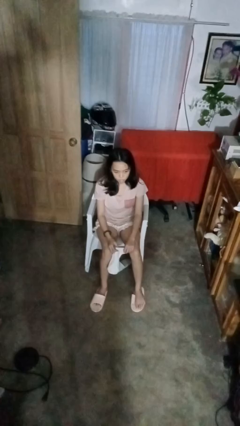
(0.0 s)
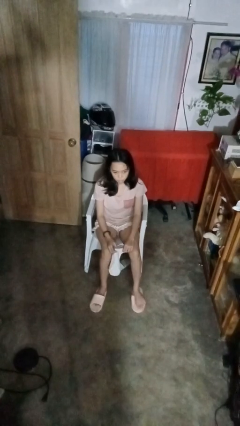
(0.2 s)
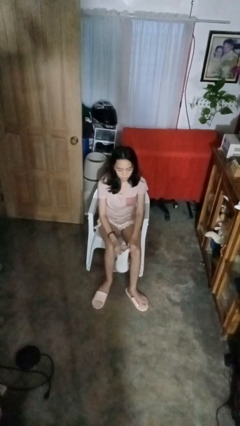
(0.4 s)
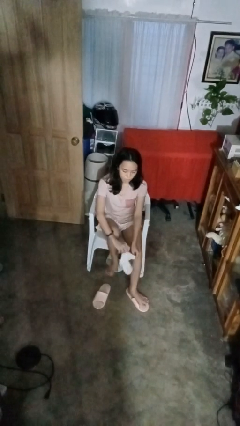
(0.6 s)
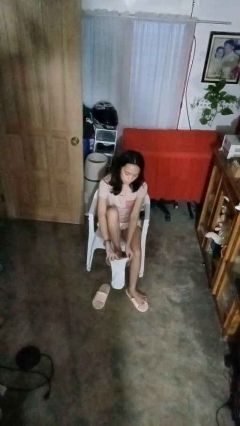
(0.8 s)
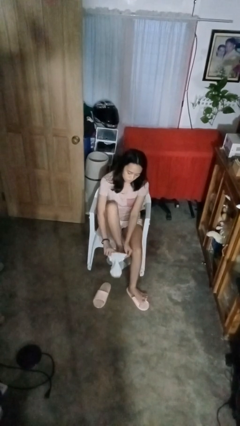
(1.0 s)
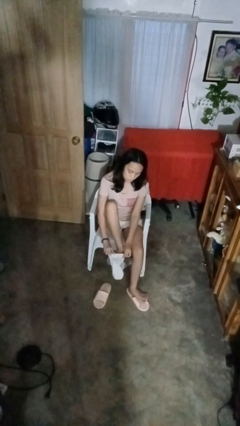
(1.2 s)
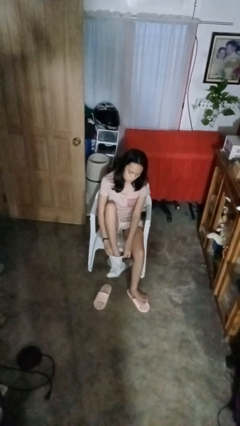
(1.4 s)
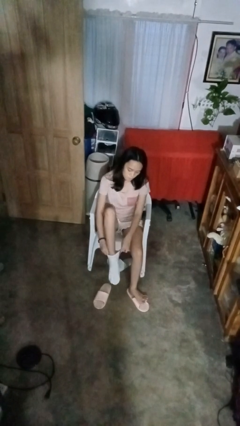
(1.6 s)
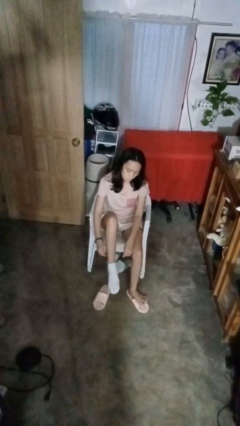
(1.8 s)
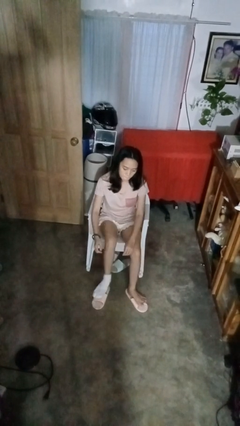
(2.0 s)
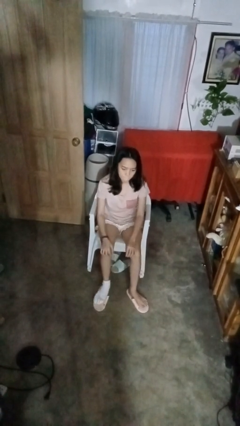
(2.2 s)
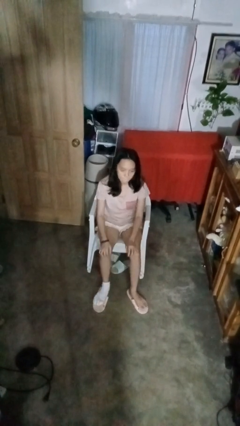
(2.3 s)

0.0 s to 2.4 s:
person puts on socks

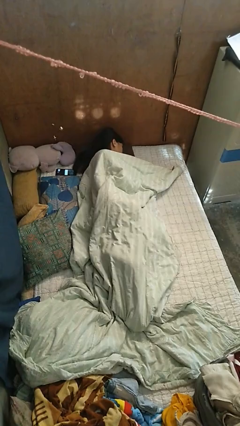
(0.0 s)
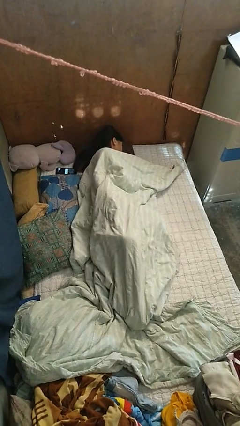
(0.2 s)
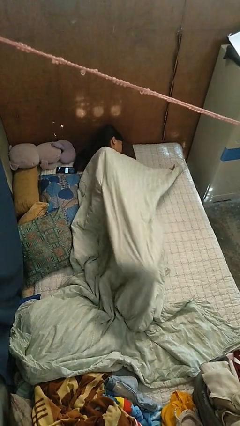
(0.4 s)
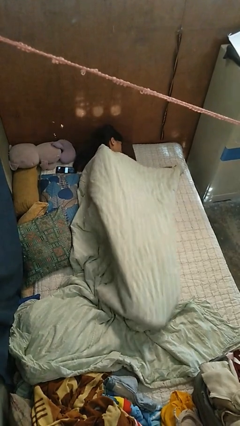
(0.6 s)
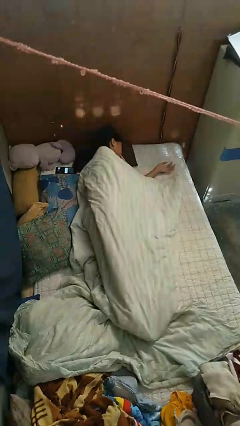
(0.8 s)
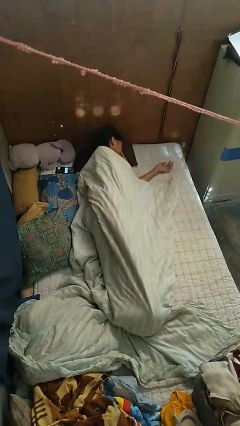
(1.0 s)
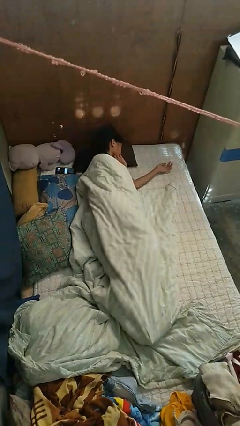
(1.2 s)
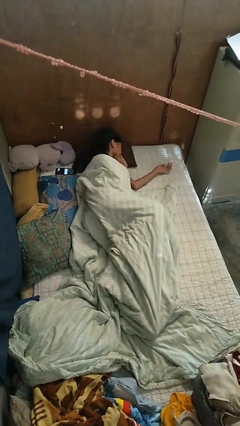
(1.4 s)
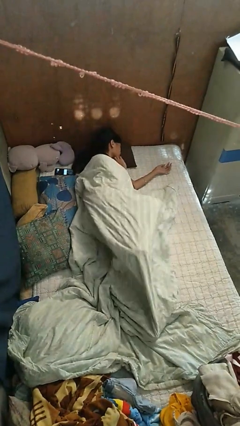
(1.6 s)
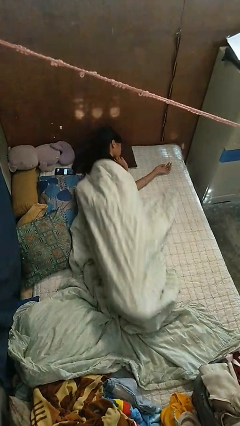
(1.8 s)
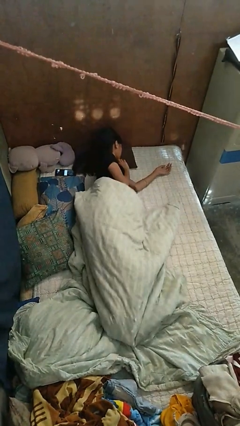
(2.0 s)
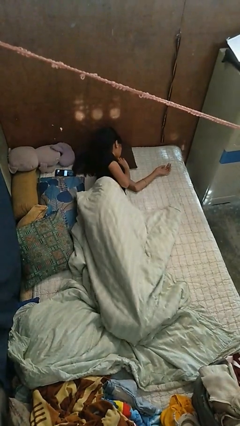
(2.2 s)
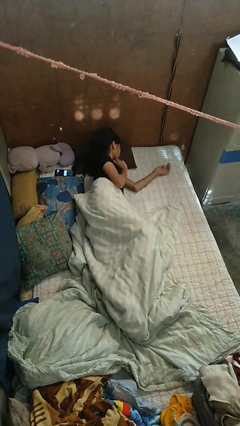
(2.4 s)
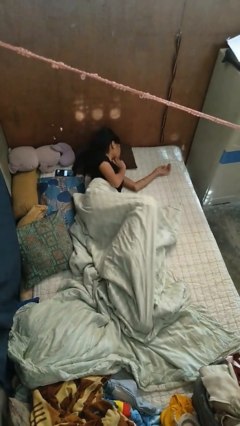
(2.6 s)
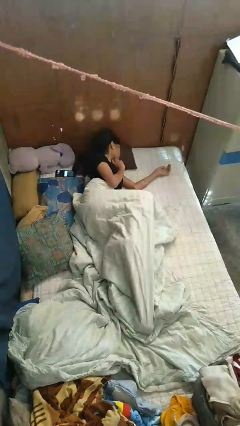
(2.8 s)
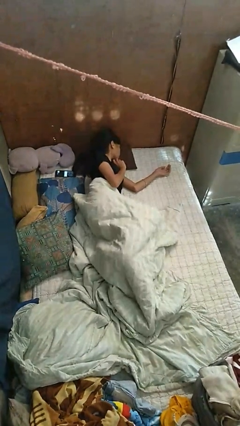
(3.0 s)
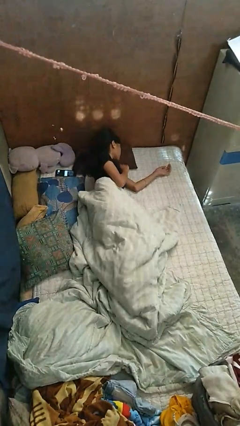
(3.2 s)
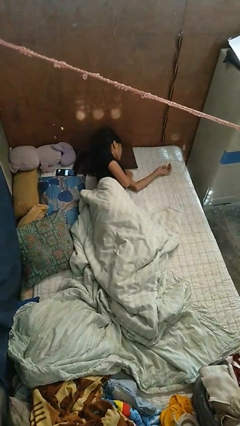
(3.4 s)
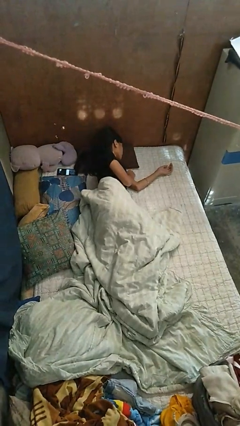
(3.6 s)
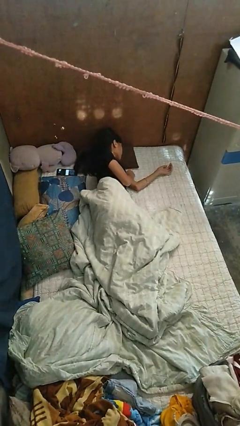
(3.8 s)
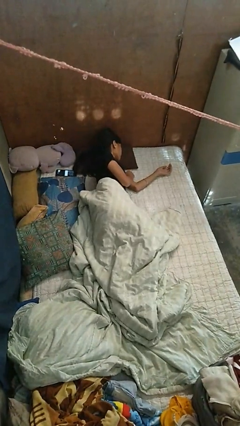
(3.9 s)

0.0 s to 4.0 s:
person uncovers with bedsheets

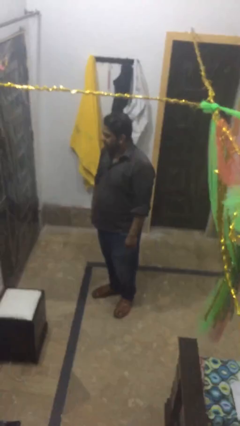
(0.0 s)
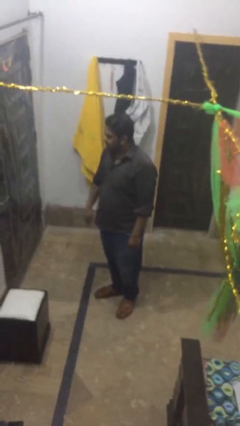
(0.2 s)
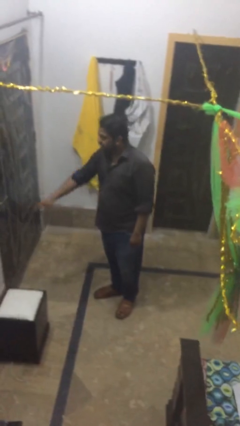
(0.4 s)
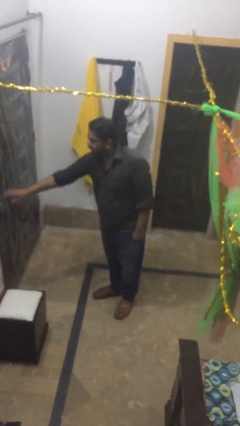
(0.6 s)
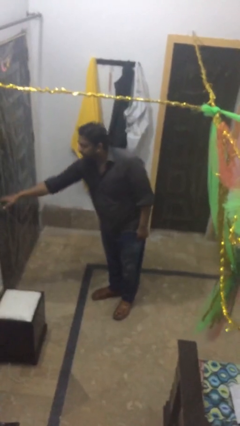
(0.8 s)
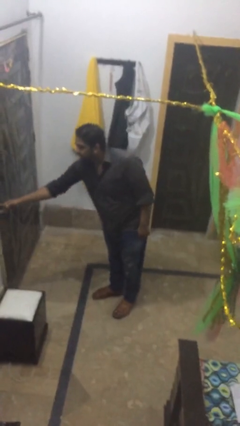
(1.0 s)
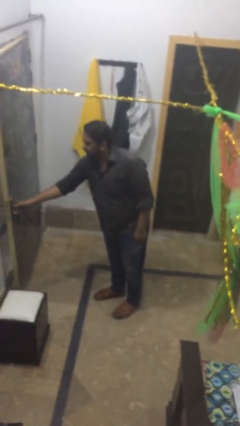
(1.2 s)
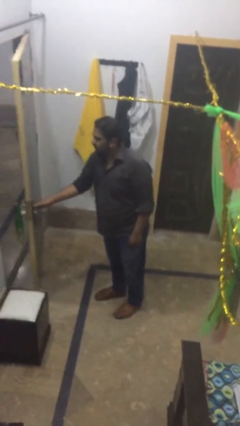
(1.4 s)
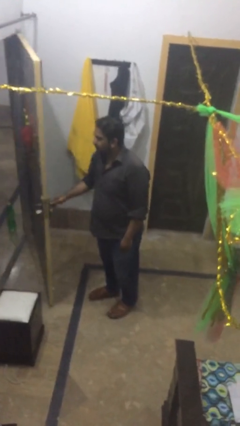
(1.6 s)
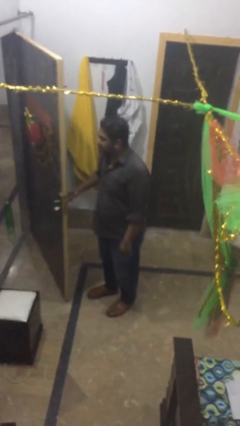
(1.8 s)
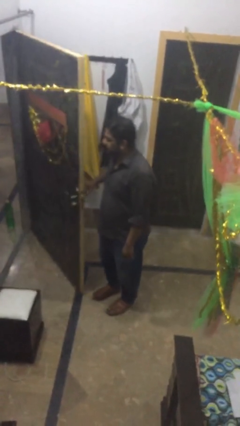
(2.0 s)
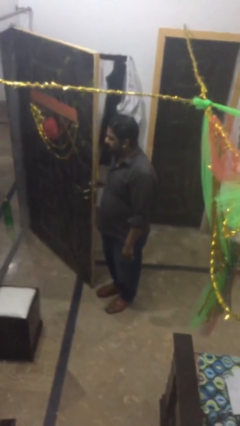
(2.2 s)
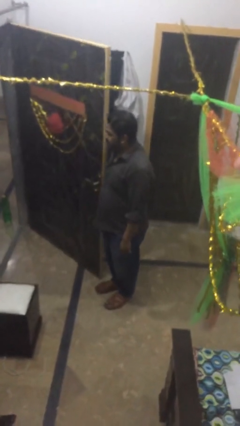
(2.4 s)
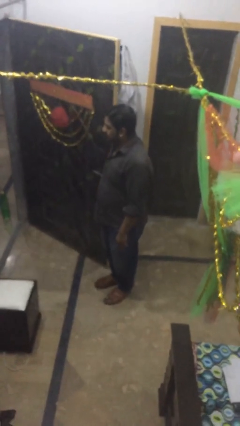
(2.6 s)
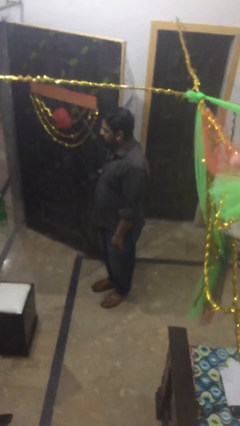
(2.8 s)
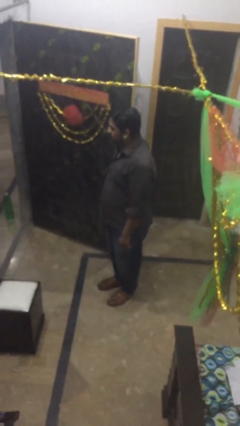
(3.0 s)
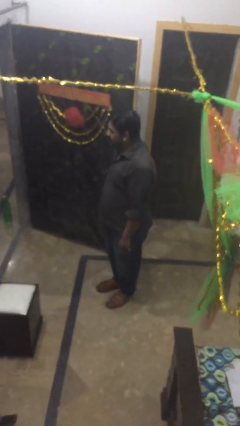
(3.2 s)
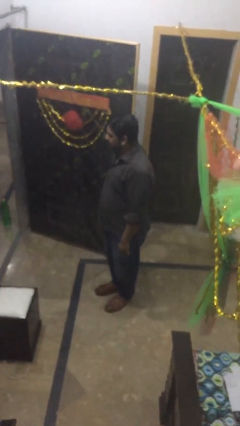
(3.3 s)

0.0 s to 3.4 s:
person opens facility door

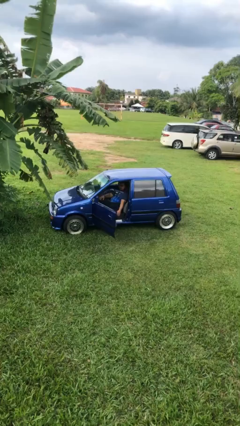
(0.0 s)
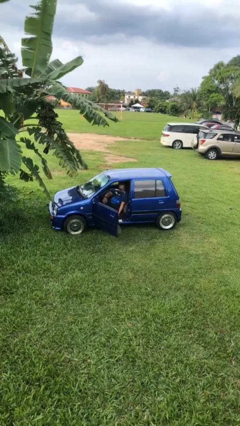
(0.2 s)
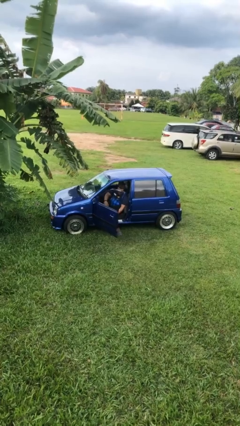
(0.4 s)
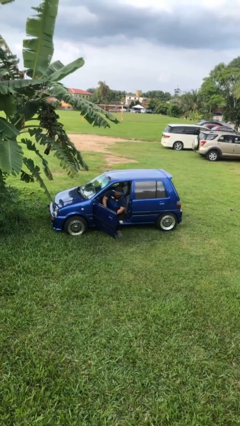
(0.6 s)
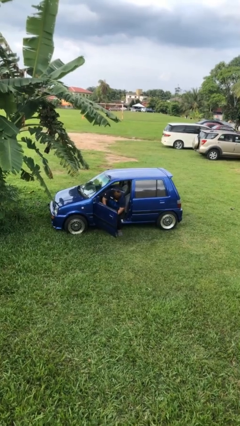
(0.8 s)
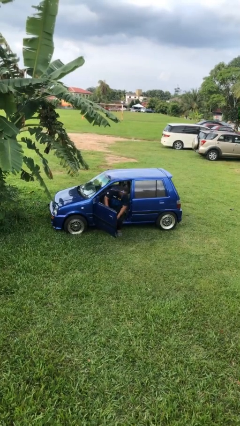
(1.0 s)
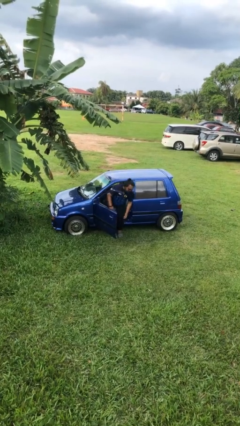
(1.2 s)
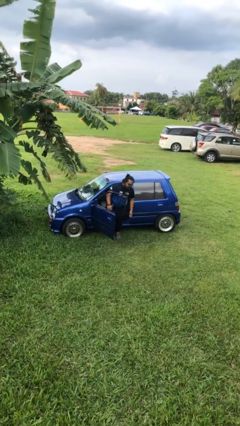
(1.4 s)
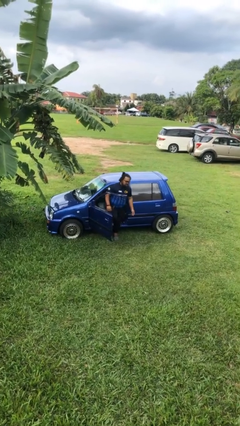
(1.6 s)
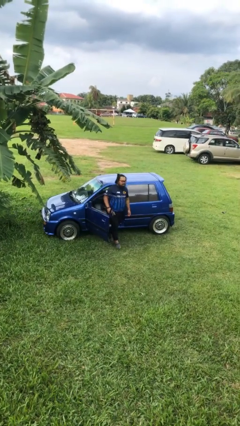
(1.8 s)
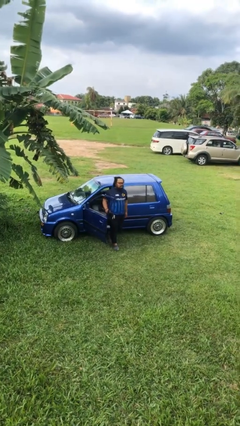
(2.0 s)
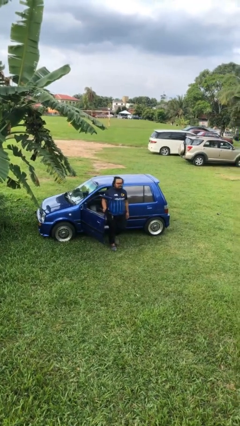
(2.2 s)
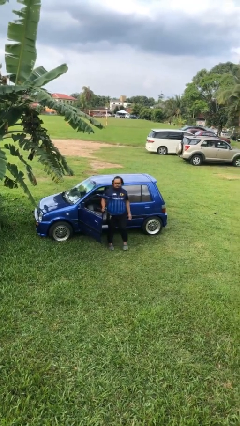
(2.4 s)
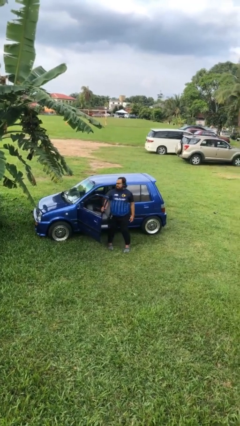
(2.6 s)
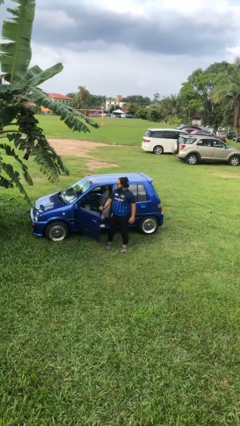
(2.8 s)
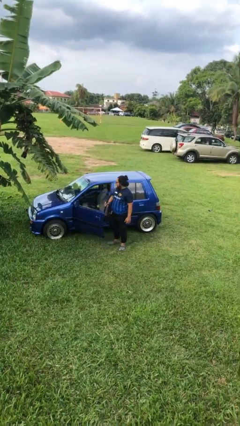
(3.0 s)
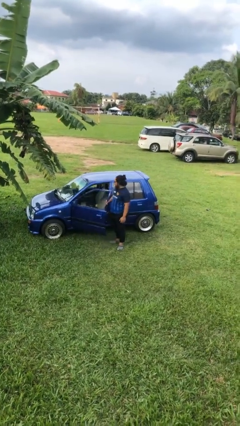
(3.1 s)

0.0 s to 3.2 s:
person exits car

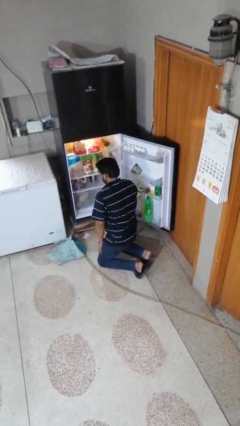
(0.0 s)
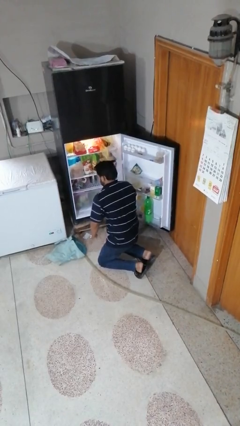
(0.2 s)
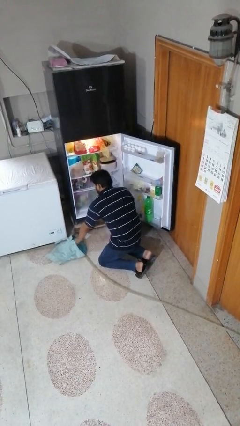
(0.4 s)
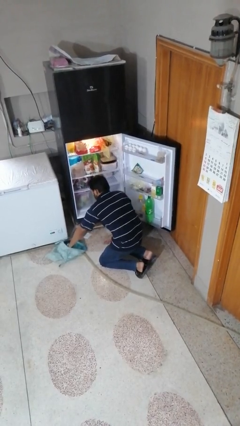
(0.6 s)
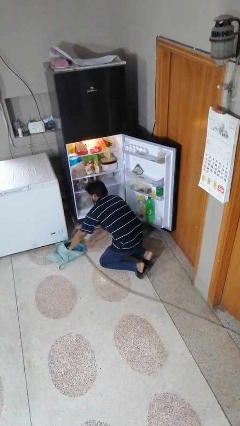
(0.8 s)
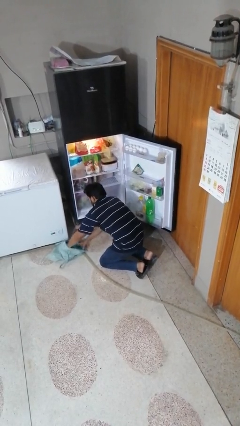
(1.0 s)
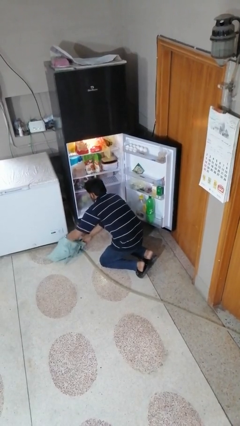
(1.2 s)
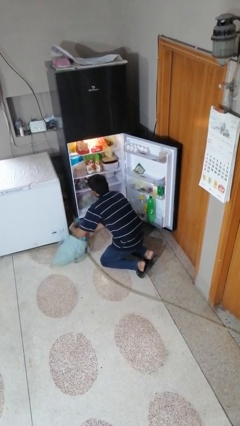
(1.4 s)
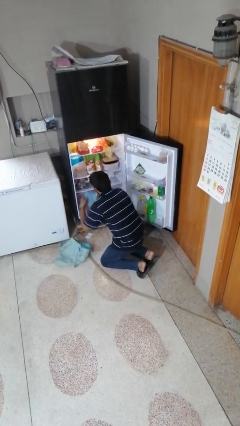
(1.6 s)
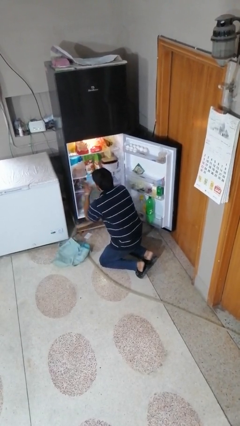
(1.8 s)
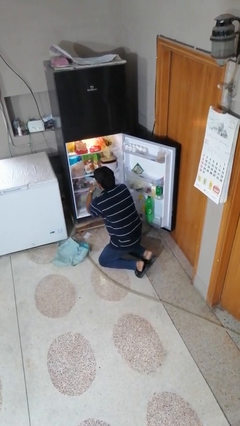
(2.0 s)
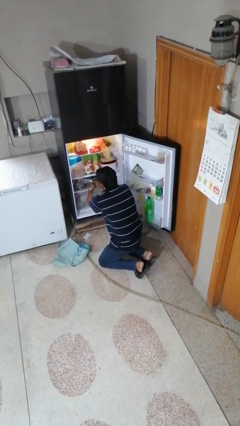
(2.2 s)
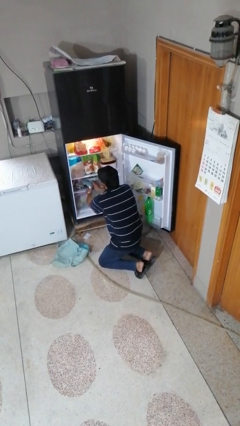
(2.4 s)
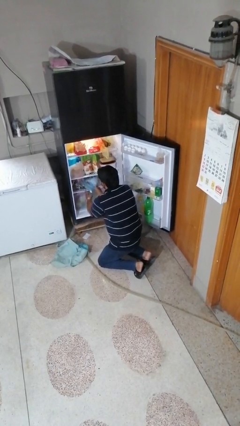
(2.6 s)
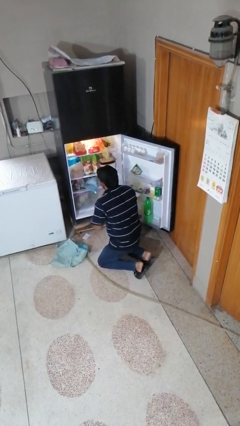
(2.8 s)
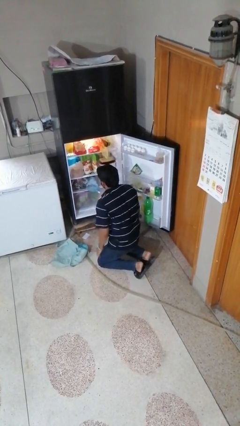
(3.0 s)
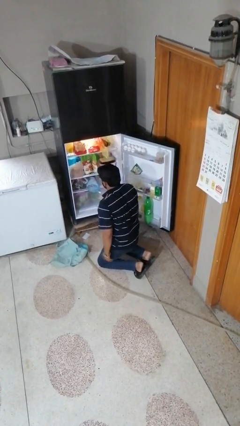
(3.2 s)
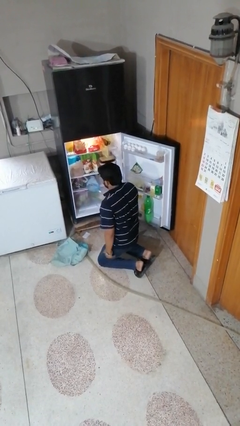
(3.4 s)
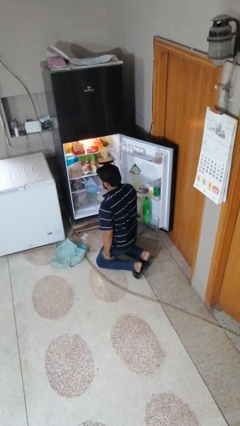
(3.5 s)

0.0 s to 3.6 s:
person loads groceries into refrigerator

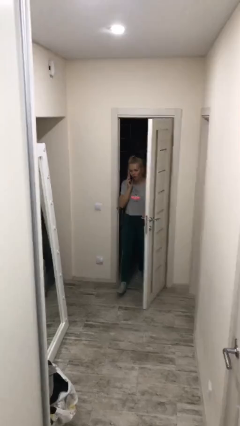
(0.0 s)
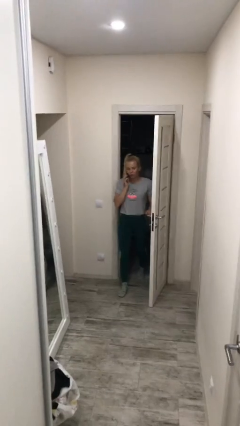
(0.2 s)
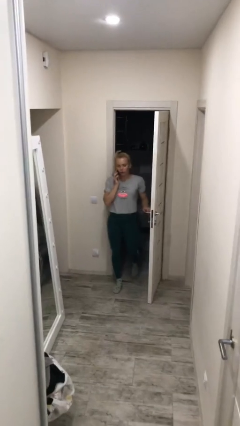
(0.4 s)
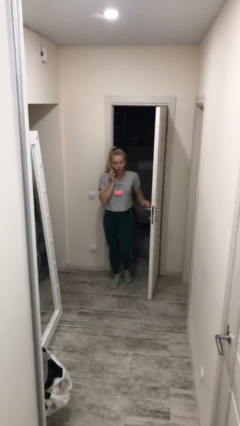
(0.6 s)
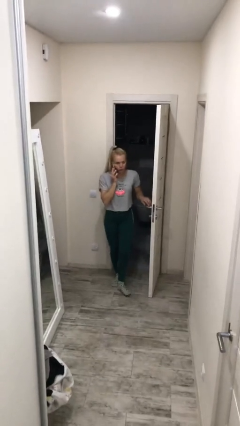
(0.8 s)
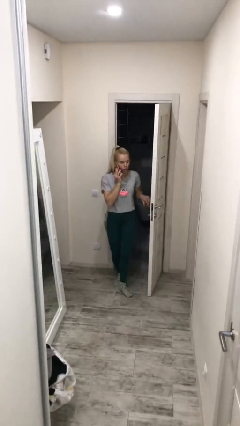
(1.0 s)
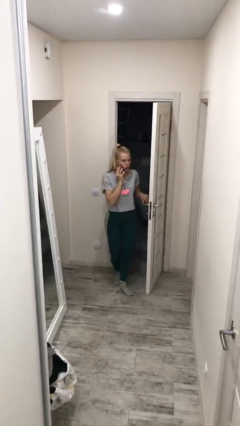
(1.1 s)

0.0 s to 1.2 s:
person enters scene through structure

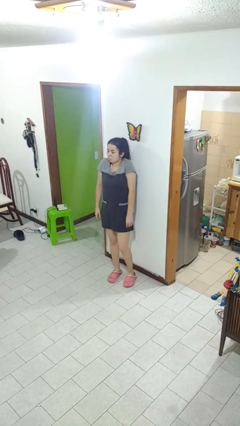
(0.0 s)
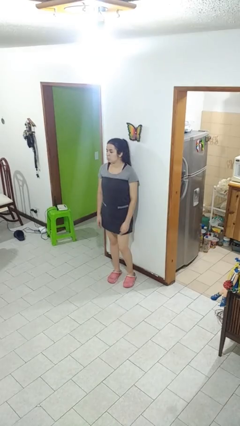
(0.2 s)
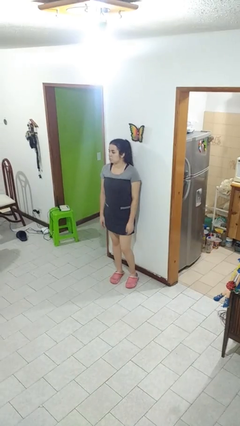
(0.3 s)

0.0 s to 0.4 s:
person shrugs
